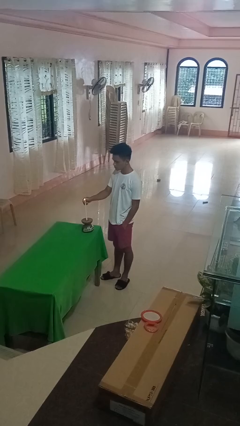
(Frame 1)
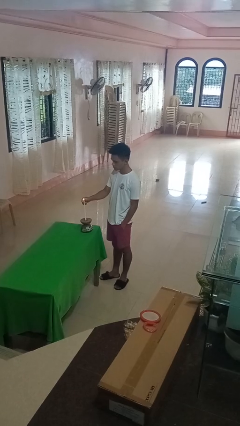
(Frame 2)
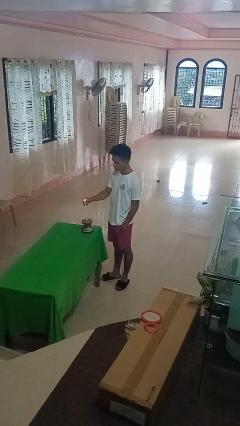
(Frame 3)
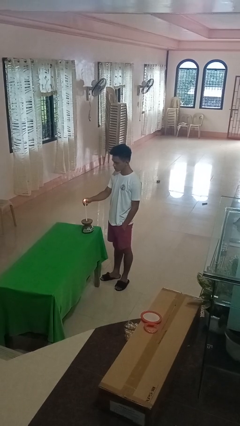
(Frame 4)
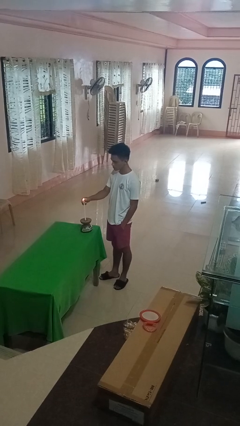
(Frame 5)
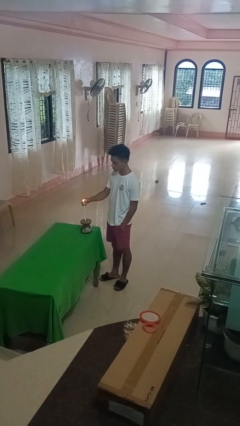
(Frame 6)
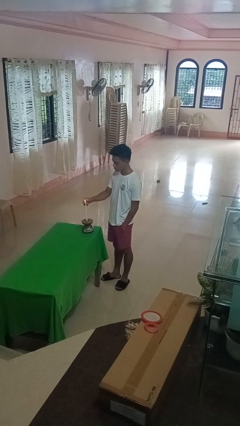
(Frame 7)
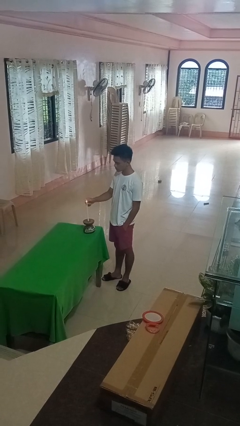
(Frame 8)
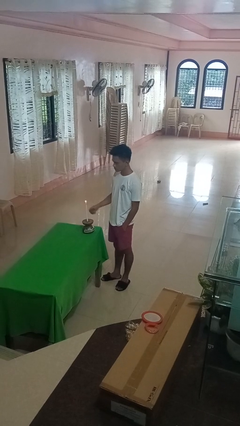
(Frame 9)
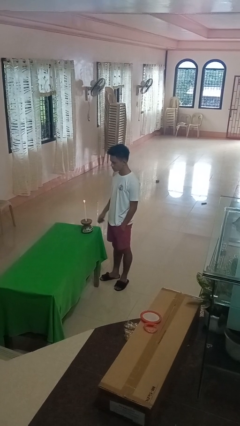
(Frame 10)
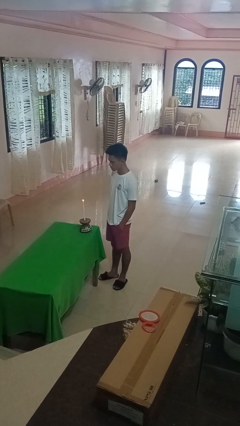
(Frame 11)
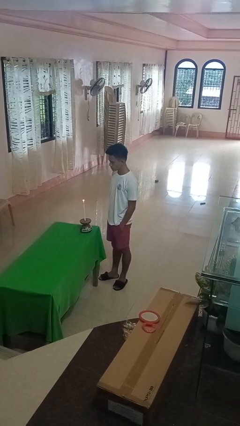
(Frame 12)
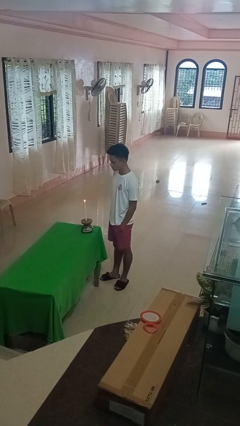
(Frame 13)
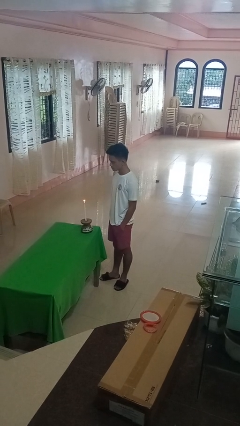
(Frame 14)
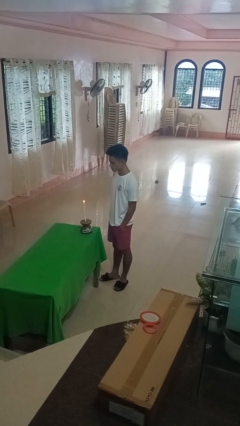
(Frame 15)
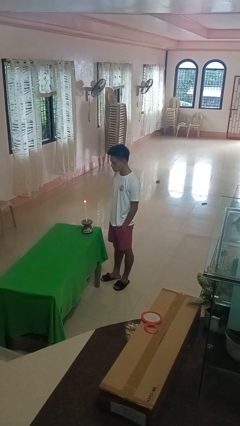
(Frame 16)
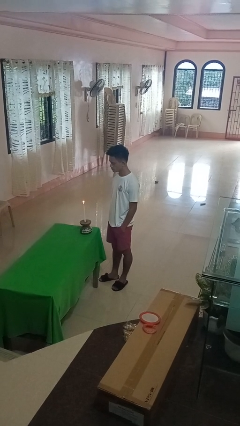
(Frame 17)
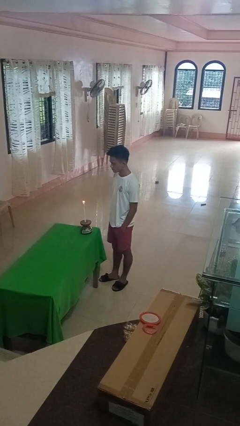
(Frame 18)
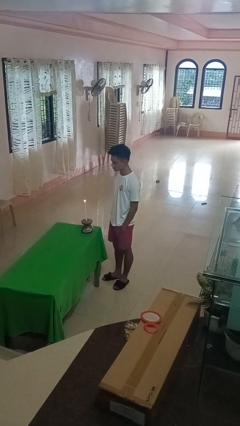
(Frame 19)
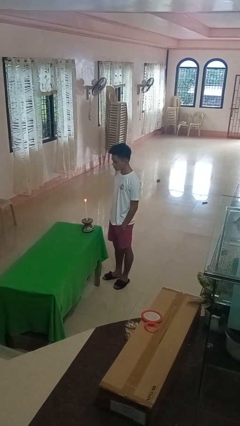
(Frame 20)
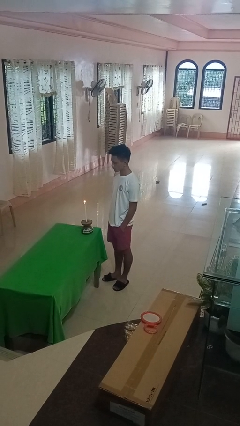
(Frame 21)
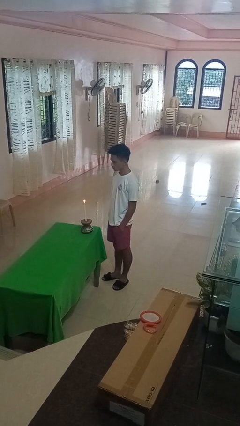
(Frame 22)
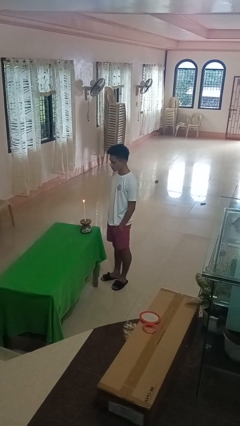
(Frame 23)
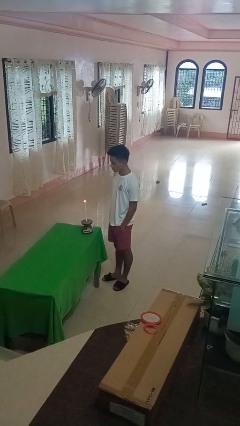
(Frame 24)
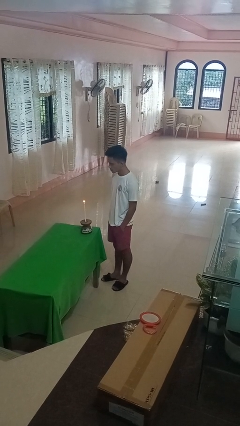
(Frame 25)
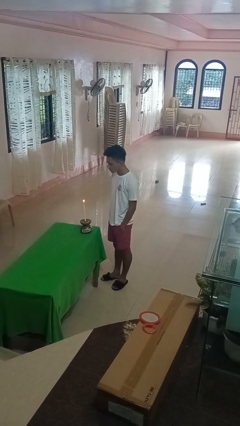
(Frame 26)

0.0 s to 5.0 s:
person lights candle

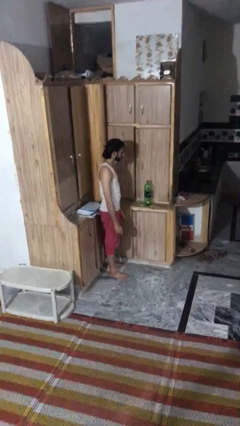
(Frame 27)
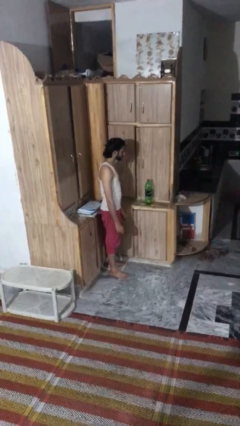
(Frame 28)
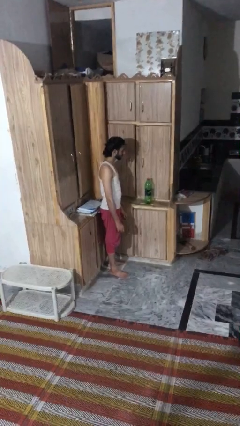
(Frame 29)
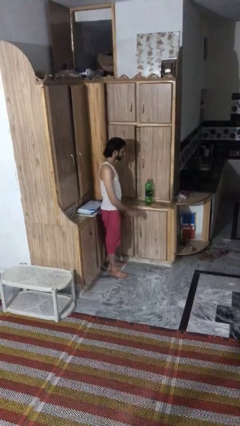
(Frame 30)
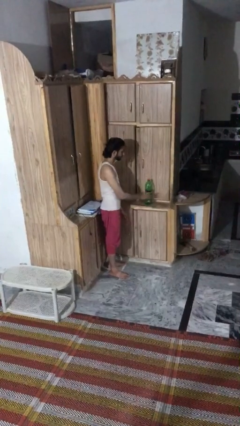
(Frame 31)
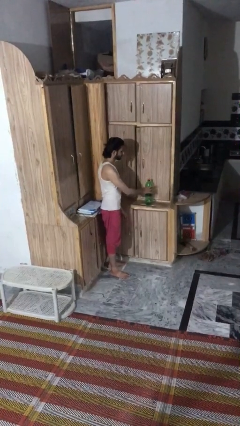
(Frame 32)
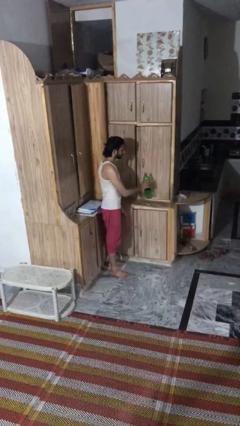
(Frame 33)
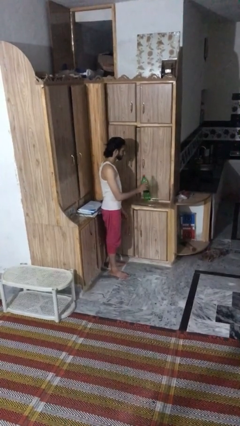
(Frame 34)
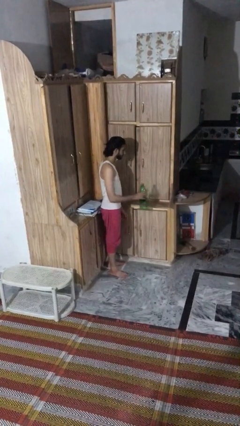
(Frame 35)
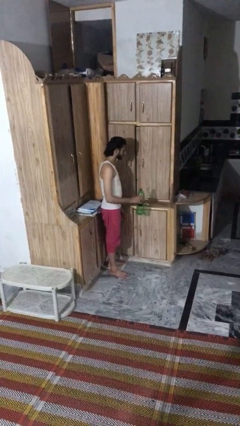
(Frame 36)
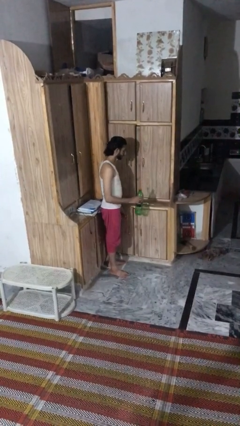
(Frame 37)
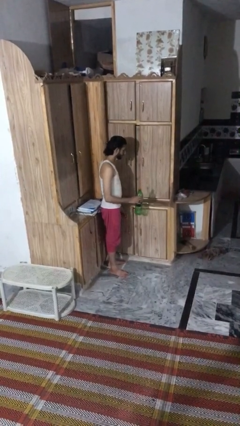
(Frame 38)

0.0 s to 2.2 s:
person picks up object from countertop

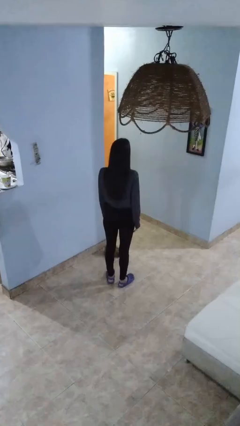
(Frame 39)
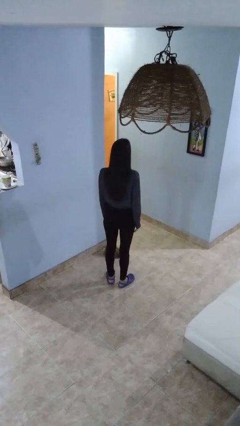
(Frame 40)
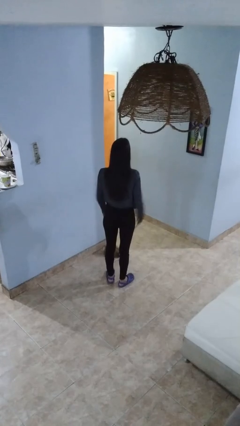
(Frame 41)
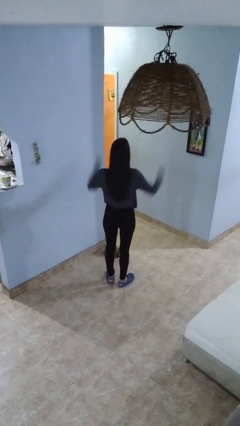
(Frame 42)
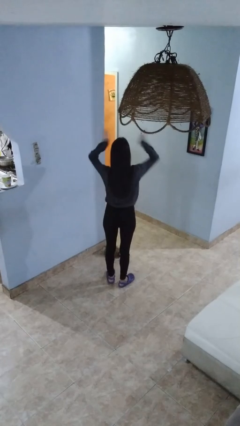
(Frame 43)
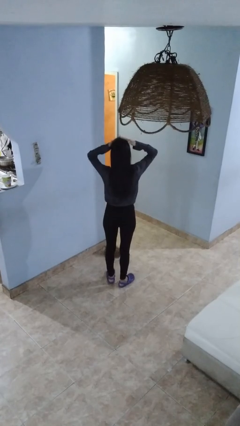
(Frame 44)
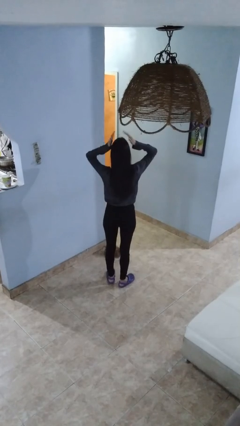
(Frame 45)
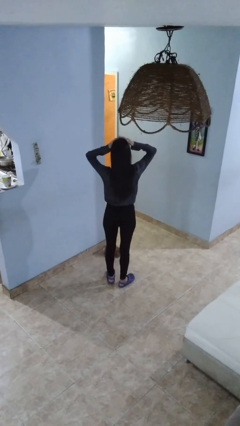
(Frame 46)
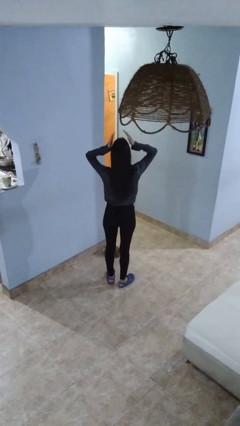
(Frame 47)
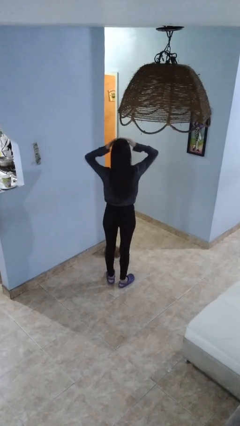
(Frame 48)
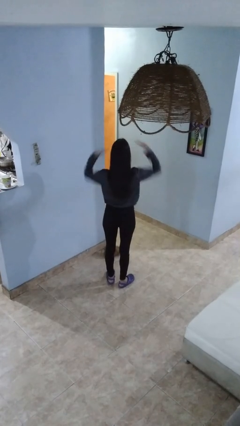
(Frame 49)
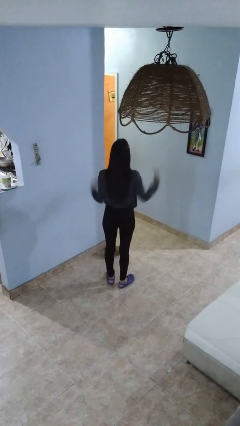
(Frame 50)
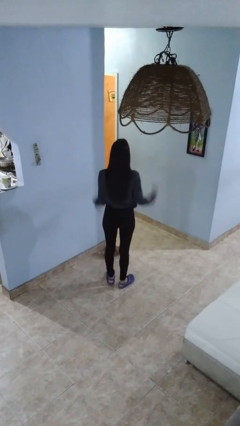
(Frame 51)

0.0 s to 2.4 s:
person pats head

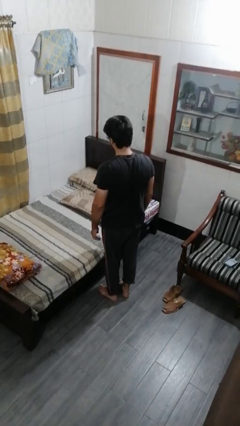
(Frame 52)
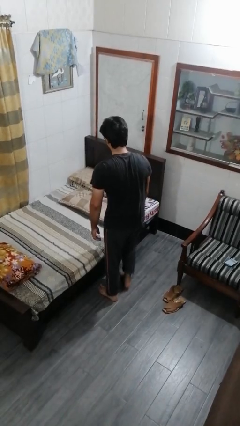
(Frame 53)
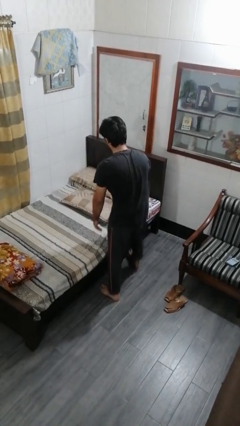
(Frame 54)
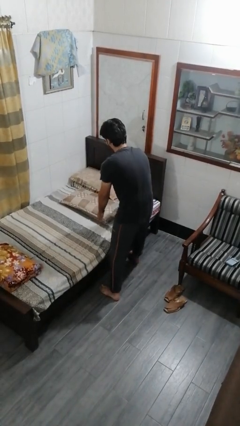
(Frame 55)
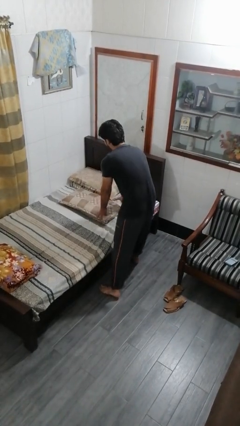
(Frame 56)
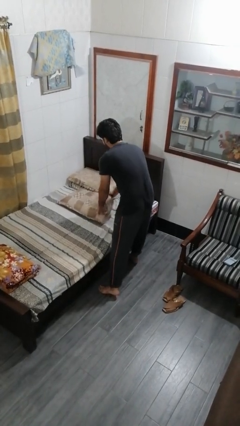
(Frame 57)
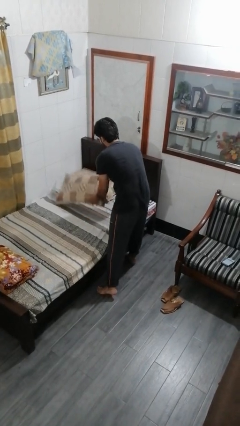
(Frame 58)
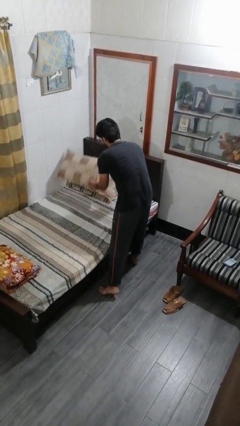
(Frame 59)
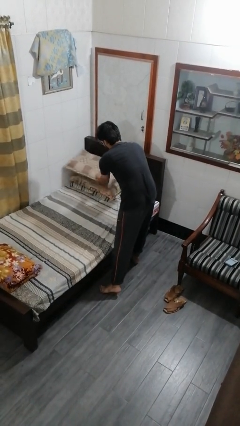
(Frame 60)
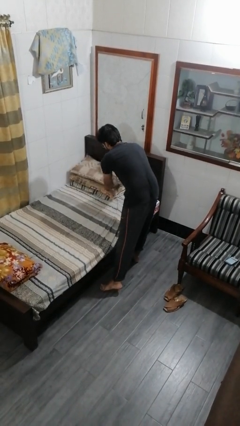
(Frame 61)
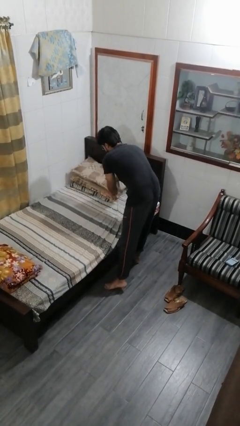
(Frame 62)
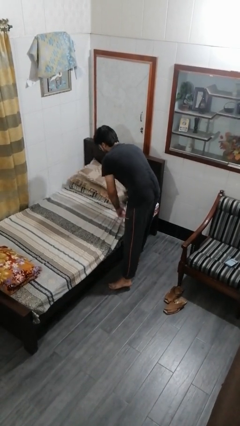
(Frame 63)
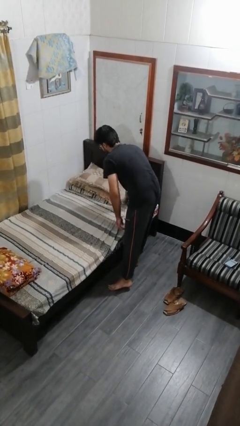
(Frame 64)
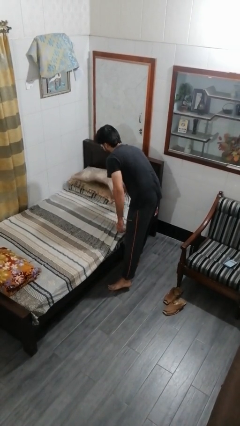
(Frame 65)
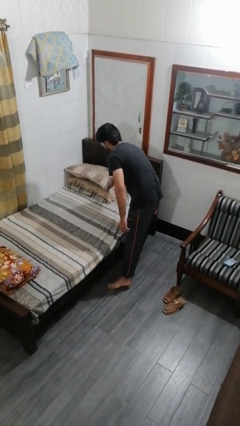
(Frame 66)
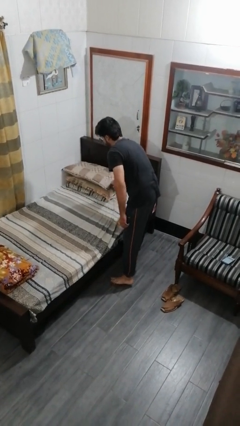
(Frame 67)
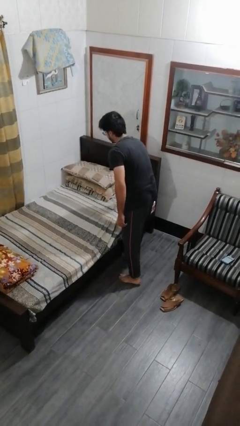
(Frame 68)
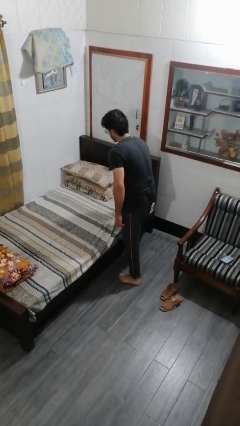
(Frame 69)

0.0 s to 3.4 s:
person makes bed

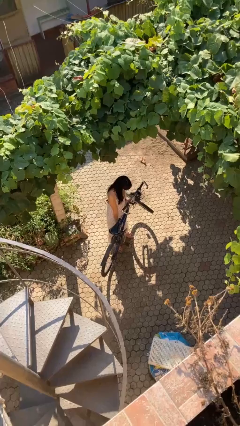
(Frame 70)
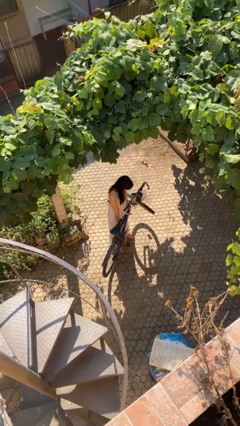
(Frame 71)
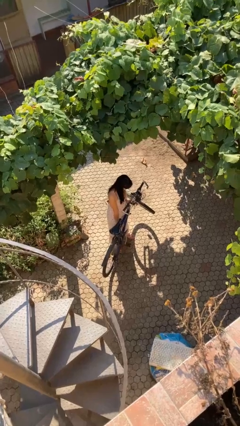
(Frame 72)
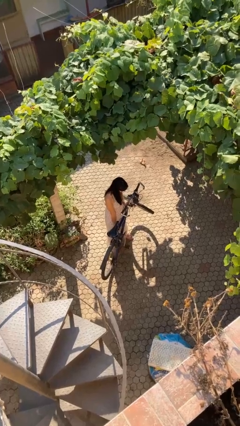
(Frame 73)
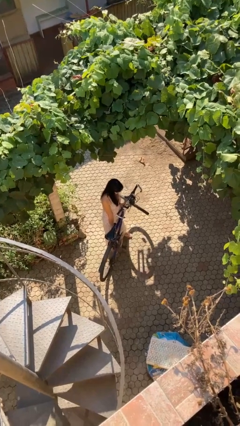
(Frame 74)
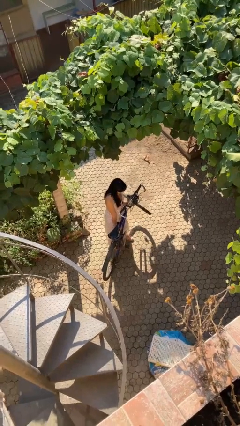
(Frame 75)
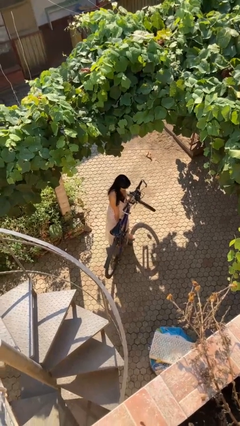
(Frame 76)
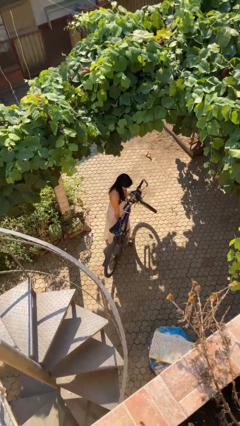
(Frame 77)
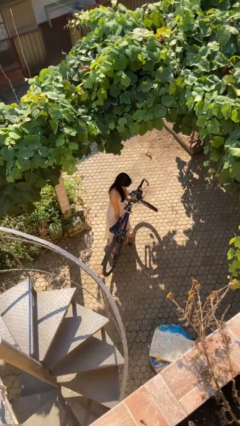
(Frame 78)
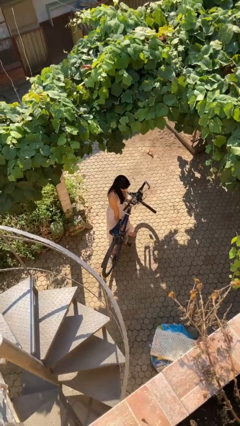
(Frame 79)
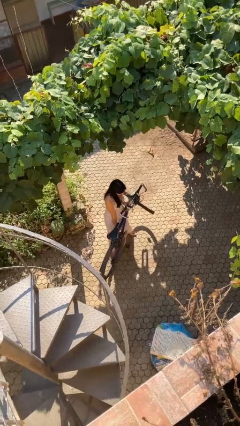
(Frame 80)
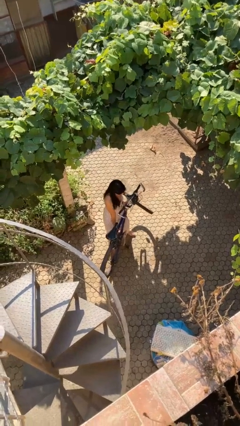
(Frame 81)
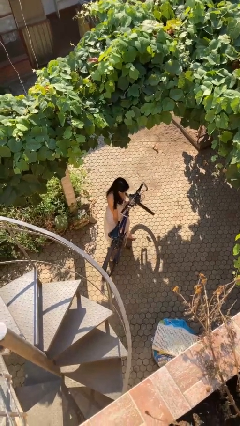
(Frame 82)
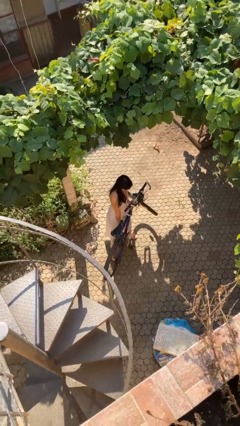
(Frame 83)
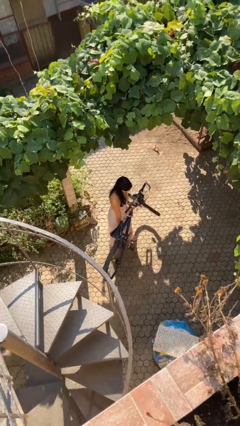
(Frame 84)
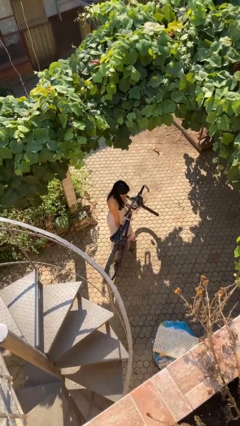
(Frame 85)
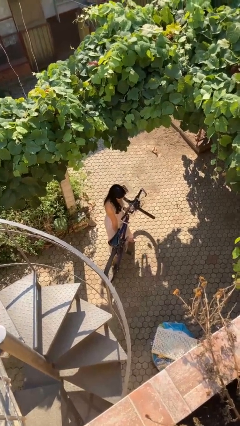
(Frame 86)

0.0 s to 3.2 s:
person carries bicycle

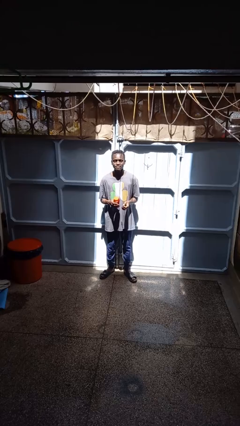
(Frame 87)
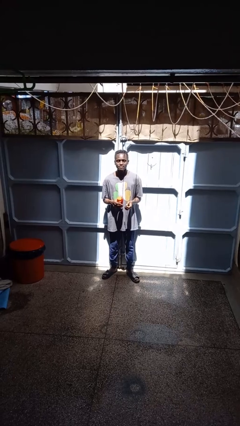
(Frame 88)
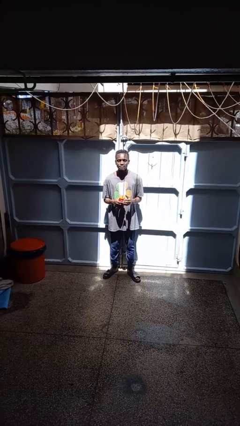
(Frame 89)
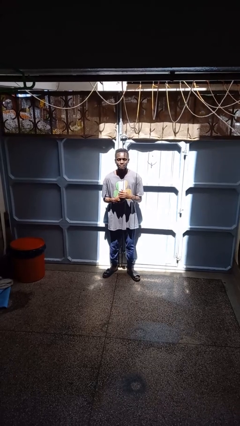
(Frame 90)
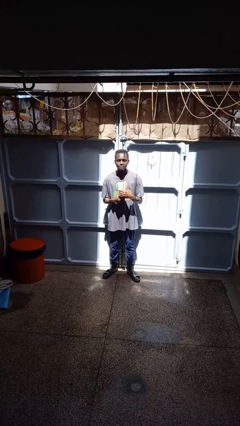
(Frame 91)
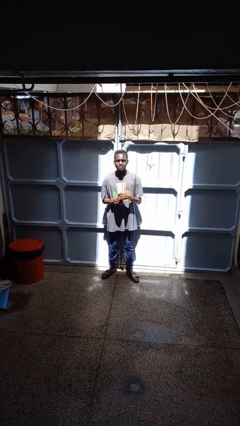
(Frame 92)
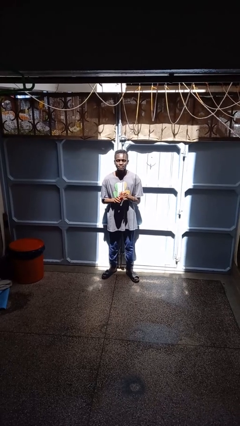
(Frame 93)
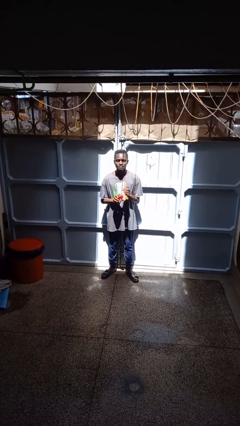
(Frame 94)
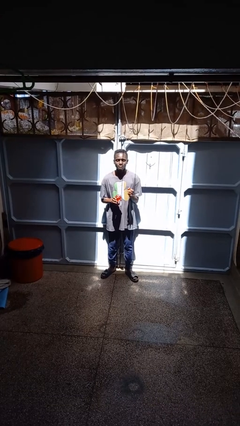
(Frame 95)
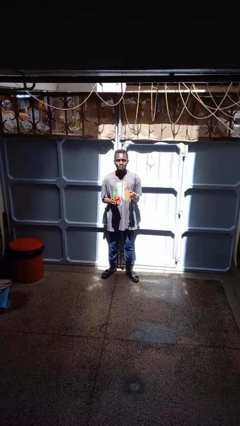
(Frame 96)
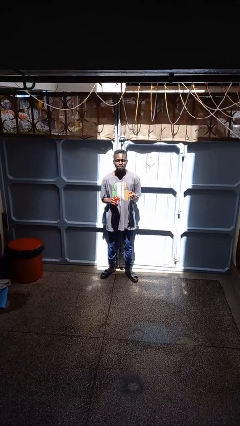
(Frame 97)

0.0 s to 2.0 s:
person opens jar
